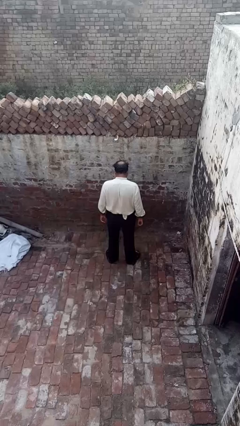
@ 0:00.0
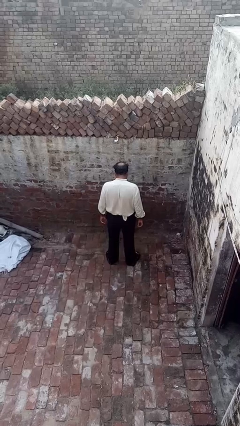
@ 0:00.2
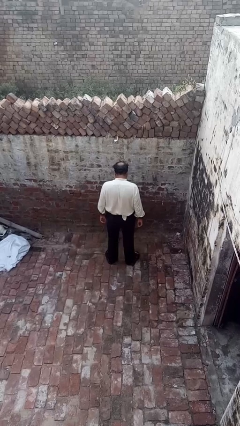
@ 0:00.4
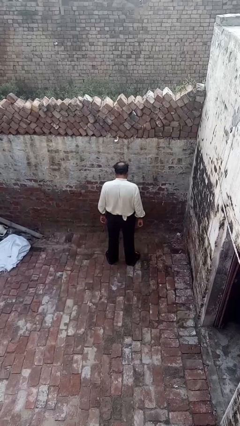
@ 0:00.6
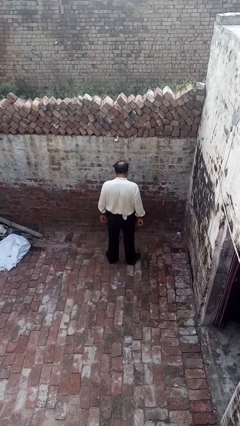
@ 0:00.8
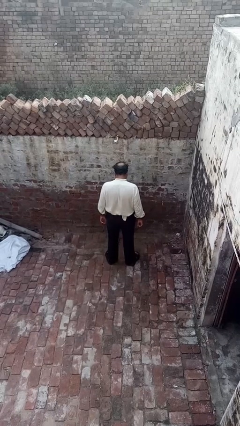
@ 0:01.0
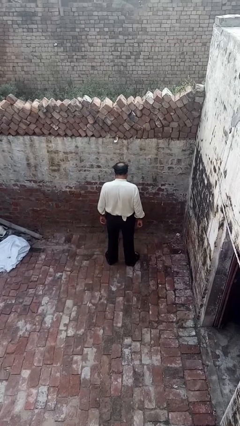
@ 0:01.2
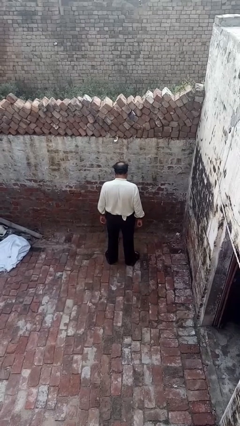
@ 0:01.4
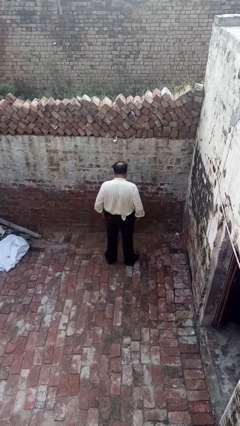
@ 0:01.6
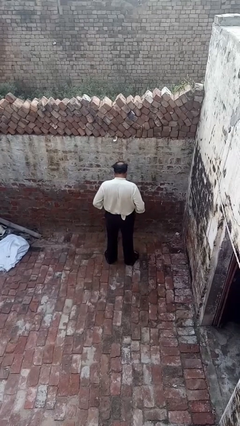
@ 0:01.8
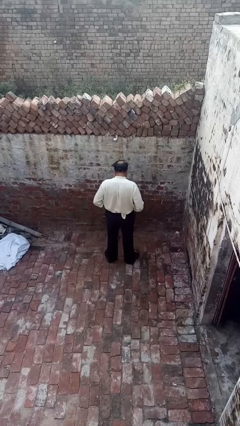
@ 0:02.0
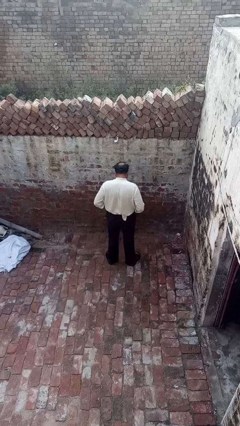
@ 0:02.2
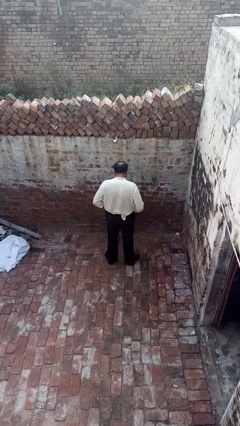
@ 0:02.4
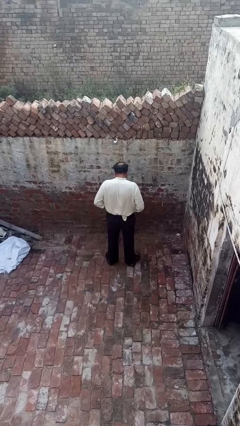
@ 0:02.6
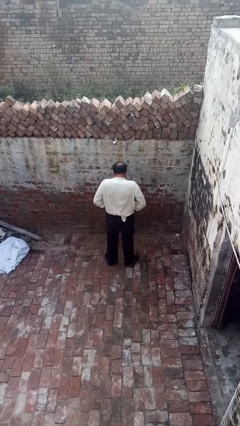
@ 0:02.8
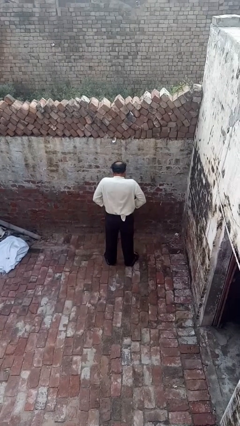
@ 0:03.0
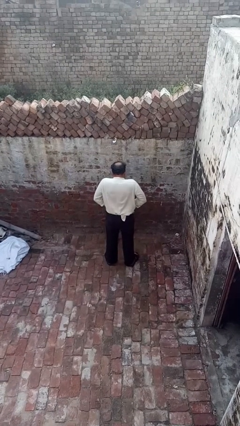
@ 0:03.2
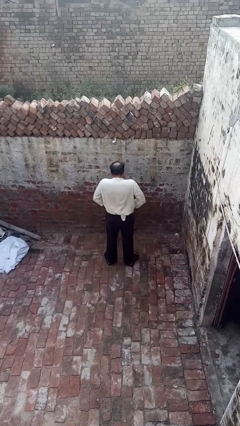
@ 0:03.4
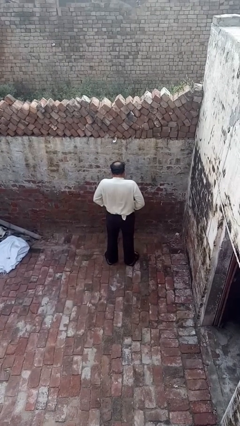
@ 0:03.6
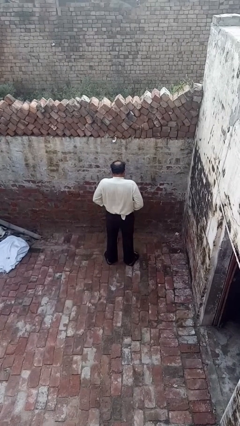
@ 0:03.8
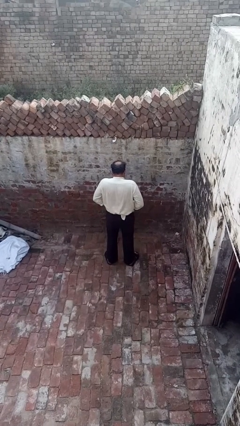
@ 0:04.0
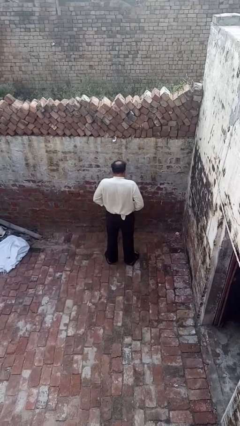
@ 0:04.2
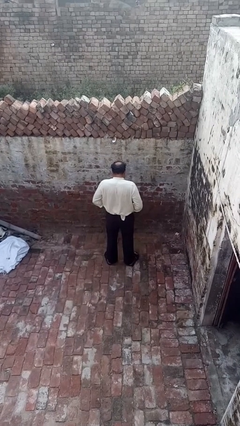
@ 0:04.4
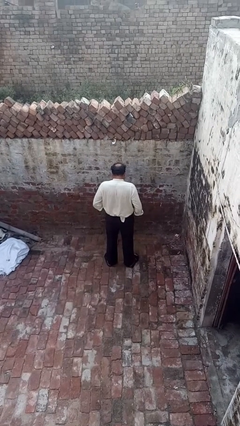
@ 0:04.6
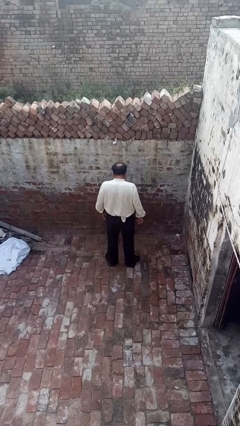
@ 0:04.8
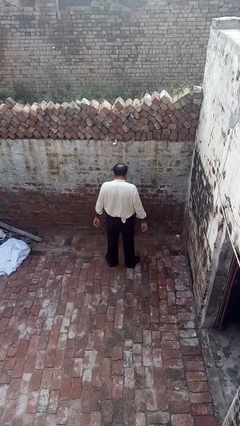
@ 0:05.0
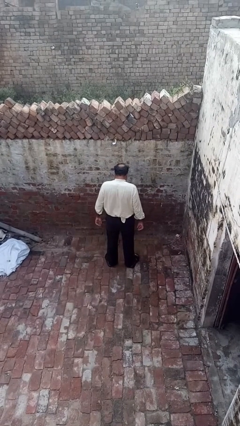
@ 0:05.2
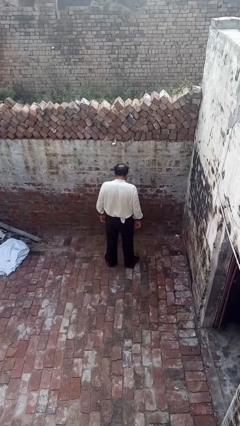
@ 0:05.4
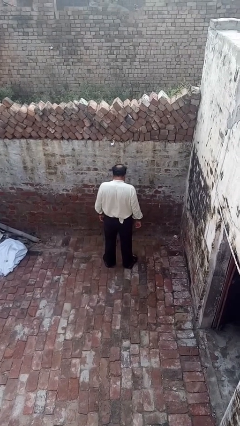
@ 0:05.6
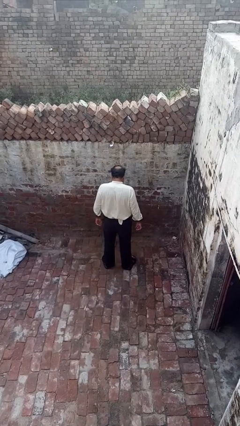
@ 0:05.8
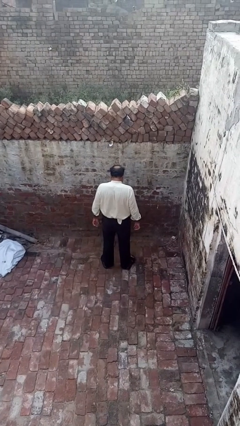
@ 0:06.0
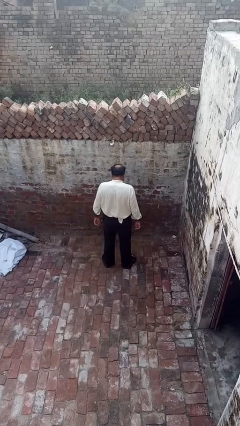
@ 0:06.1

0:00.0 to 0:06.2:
person hikes up pants

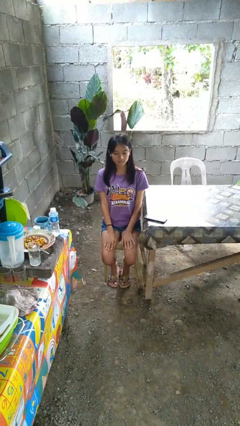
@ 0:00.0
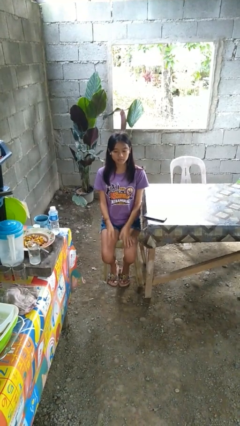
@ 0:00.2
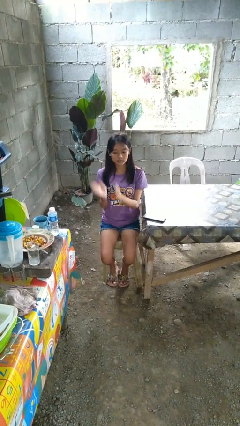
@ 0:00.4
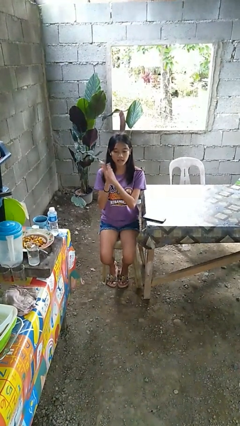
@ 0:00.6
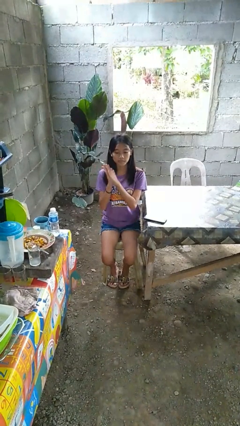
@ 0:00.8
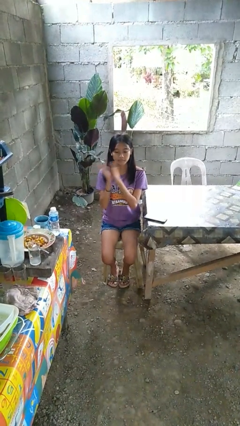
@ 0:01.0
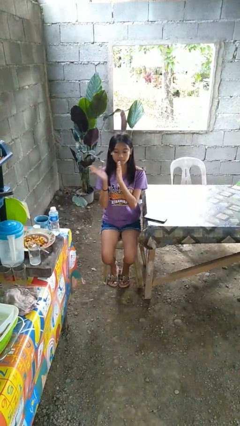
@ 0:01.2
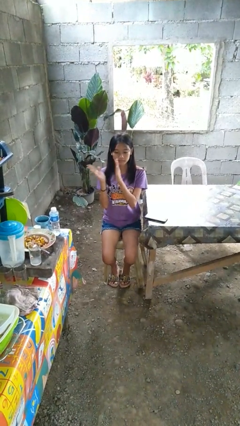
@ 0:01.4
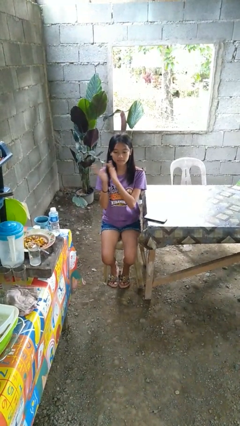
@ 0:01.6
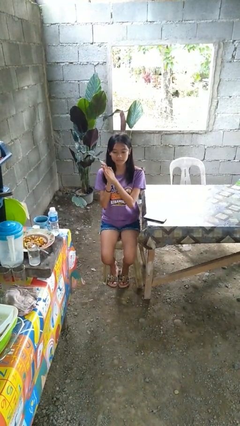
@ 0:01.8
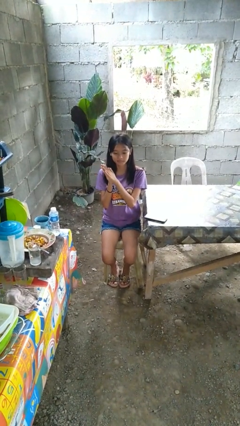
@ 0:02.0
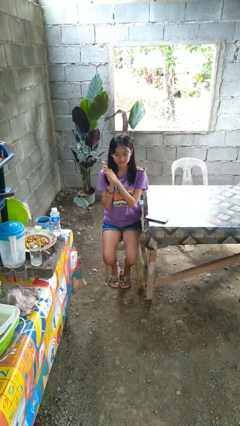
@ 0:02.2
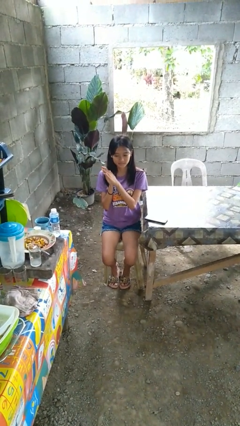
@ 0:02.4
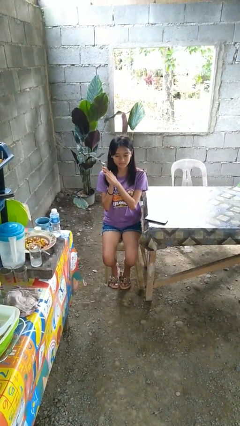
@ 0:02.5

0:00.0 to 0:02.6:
person claps hands

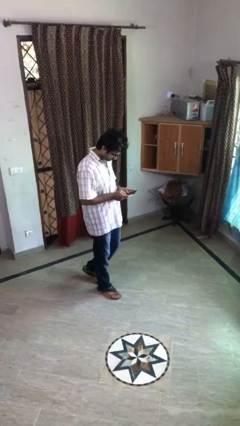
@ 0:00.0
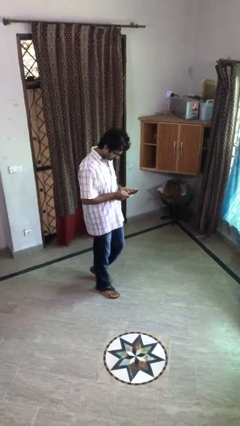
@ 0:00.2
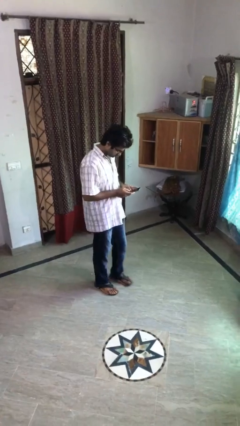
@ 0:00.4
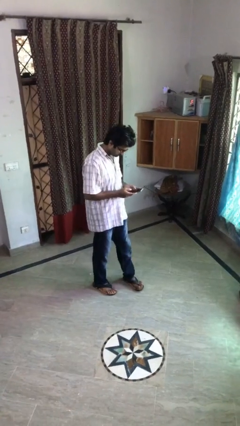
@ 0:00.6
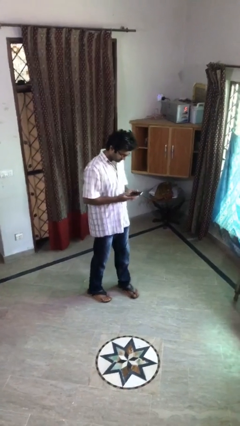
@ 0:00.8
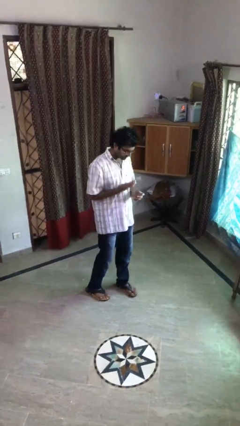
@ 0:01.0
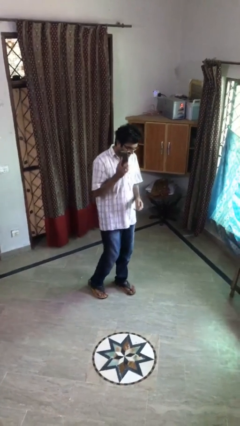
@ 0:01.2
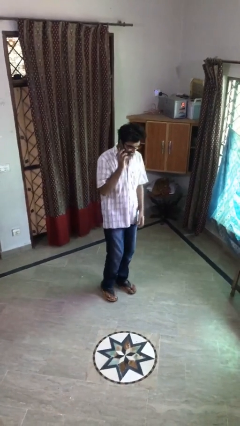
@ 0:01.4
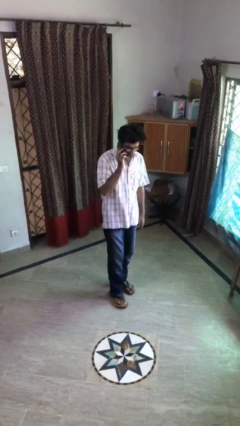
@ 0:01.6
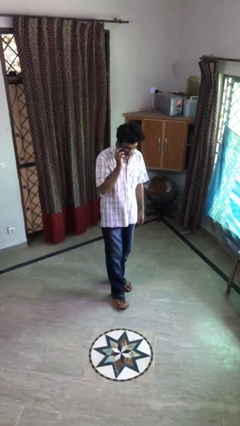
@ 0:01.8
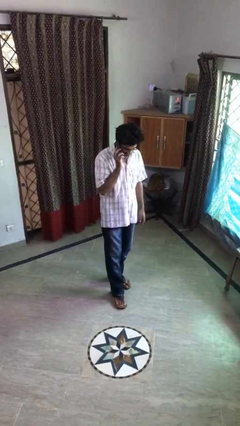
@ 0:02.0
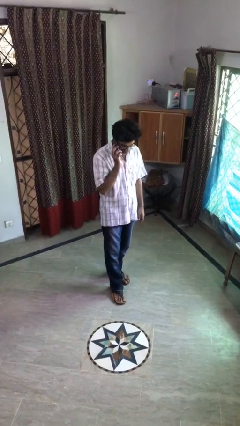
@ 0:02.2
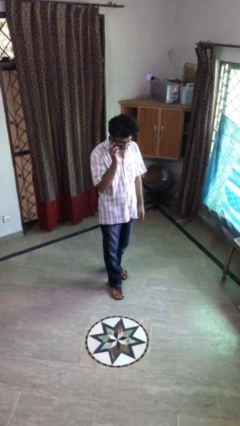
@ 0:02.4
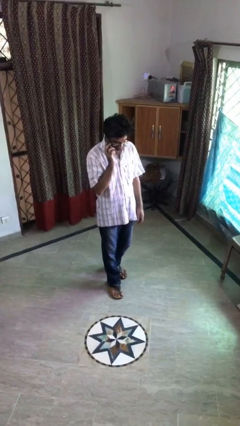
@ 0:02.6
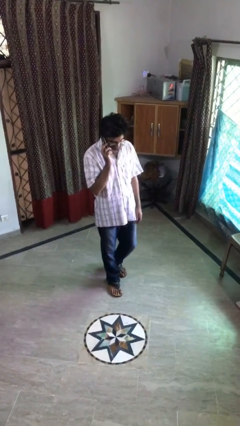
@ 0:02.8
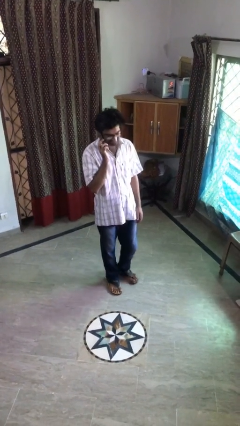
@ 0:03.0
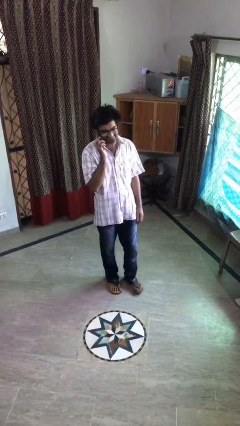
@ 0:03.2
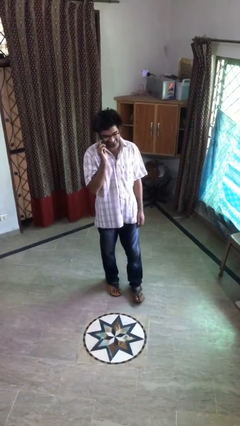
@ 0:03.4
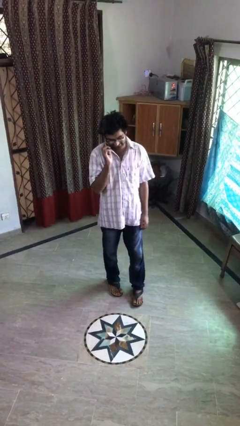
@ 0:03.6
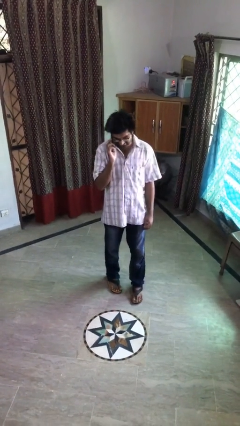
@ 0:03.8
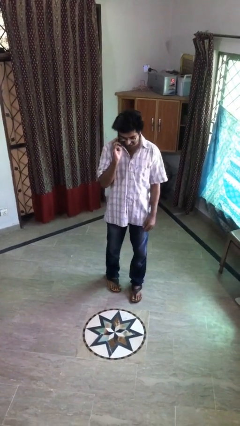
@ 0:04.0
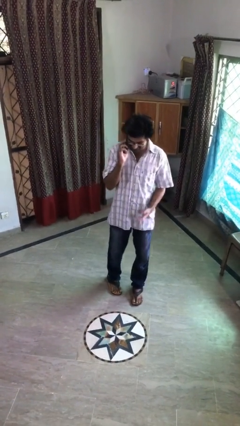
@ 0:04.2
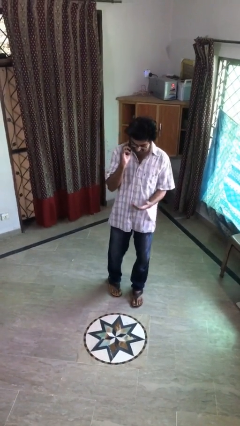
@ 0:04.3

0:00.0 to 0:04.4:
person talks on phone

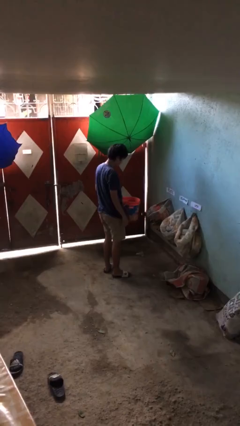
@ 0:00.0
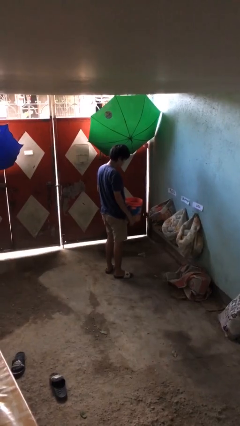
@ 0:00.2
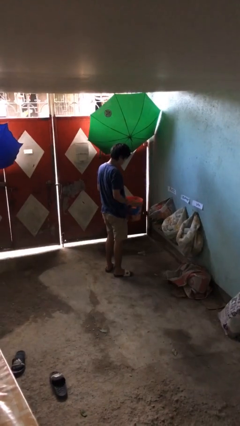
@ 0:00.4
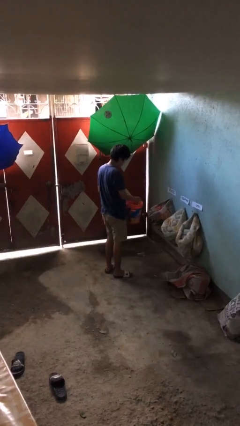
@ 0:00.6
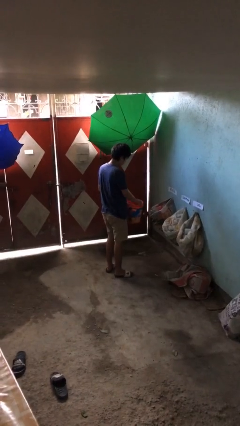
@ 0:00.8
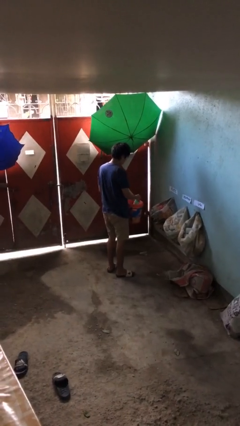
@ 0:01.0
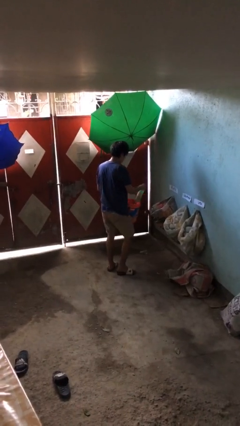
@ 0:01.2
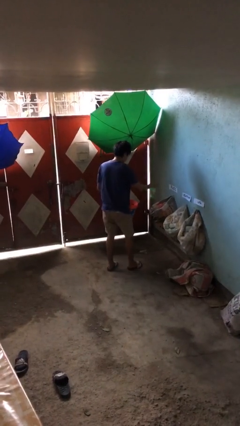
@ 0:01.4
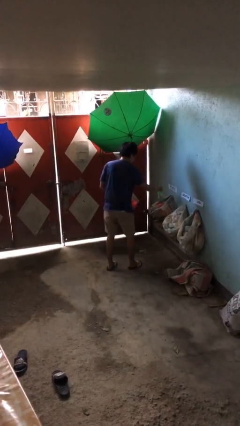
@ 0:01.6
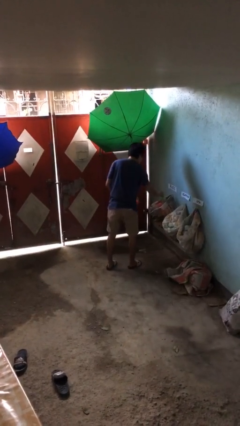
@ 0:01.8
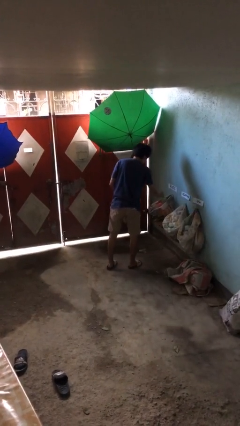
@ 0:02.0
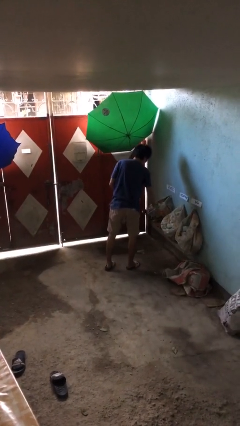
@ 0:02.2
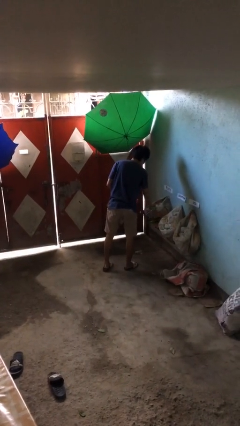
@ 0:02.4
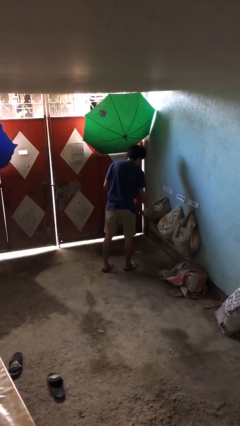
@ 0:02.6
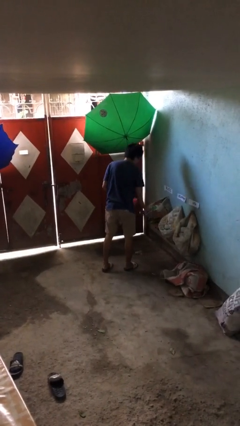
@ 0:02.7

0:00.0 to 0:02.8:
person discards trash

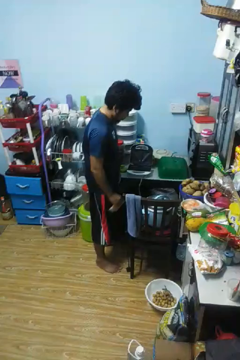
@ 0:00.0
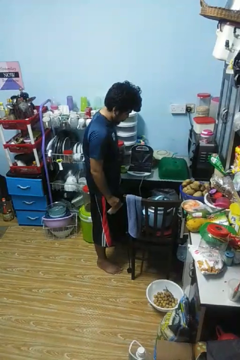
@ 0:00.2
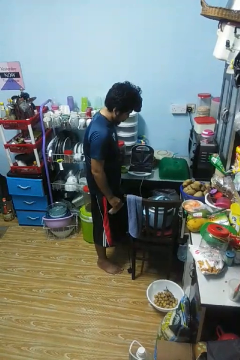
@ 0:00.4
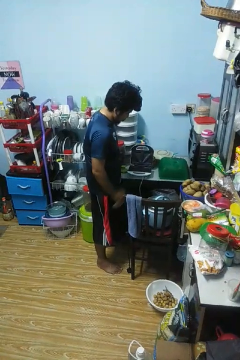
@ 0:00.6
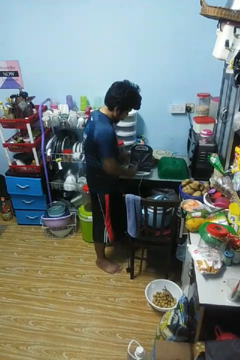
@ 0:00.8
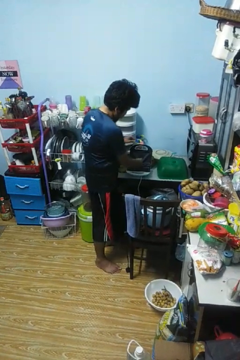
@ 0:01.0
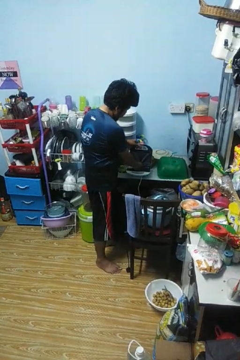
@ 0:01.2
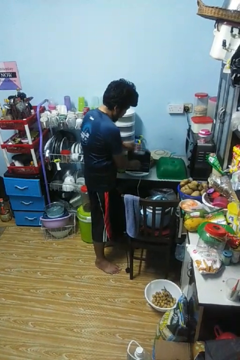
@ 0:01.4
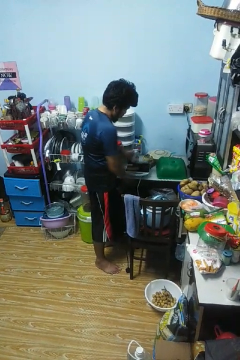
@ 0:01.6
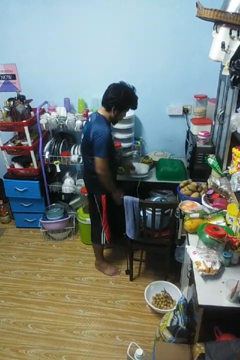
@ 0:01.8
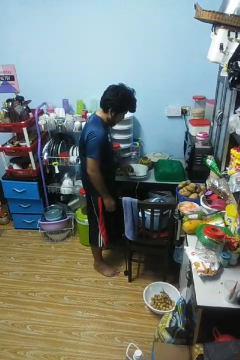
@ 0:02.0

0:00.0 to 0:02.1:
person puts object into toaster
